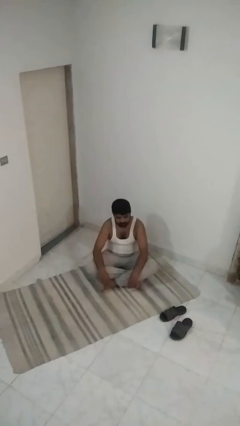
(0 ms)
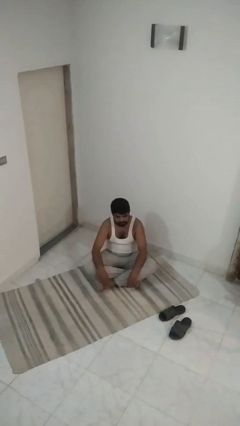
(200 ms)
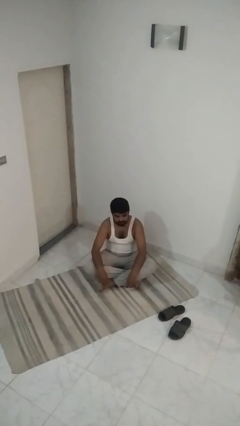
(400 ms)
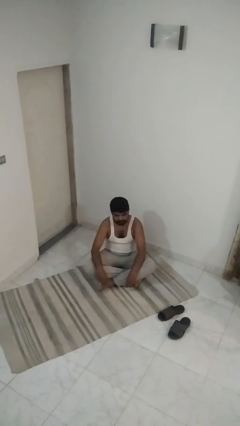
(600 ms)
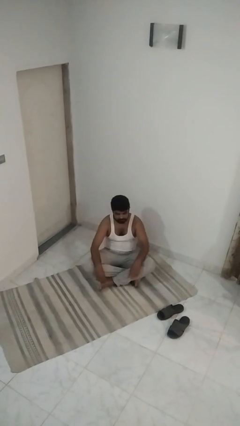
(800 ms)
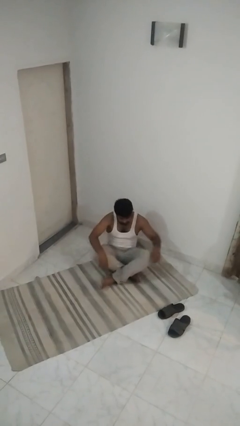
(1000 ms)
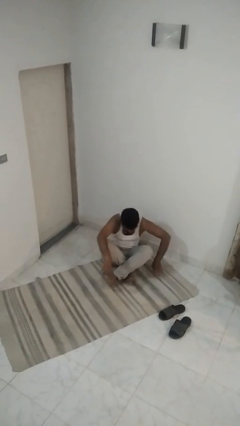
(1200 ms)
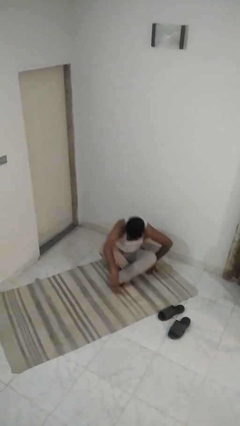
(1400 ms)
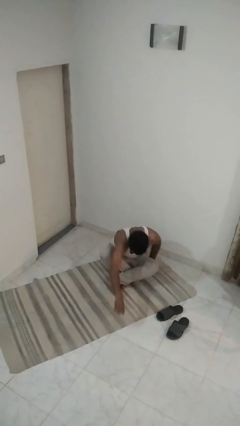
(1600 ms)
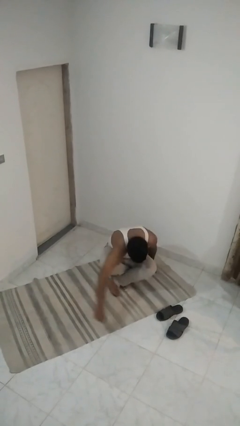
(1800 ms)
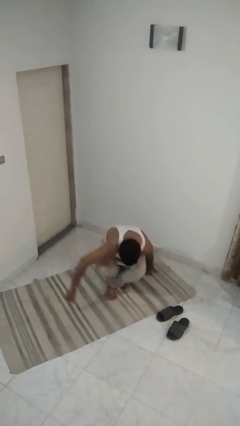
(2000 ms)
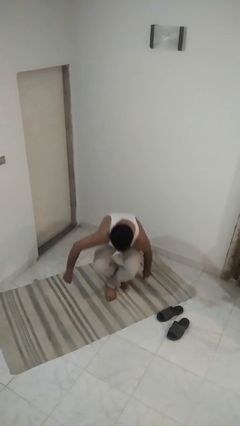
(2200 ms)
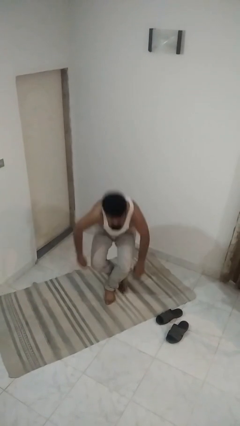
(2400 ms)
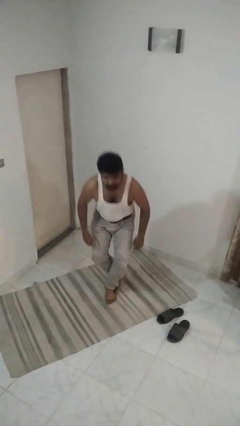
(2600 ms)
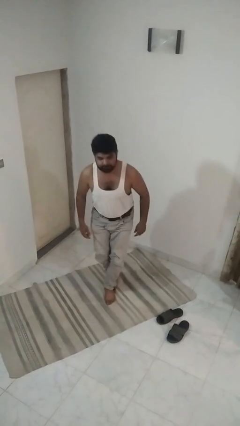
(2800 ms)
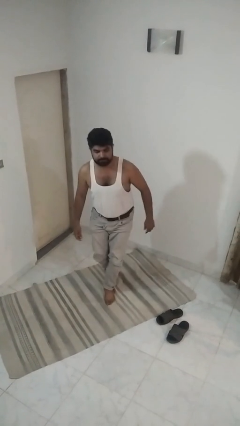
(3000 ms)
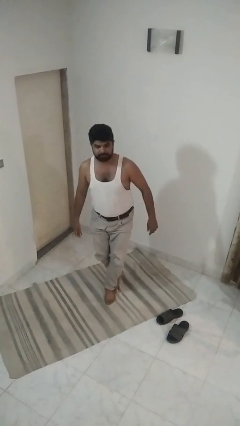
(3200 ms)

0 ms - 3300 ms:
person stands up from floor

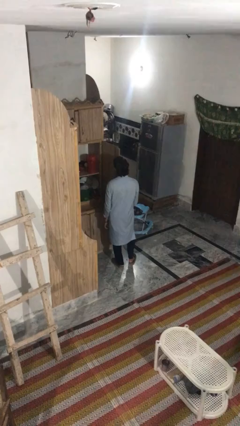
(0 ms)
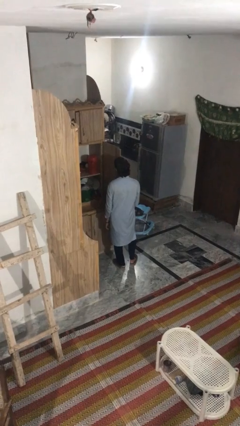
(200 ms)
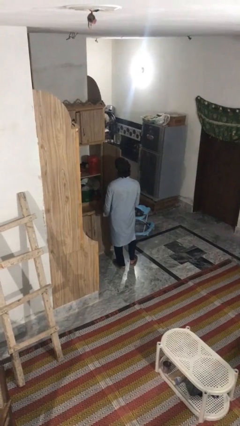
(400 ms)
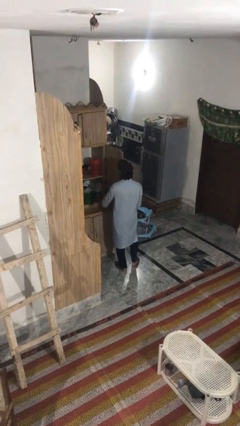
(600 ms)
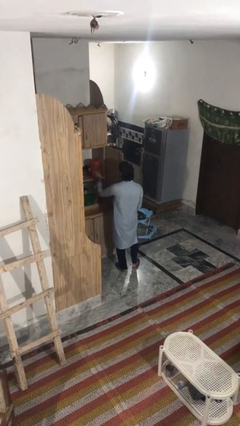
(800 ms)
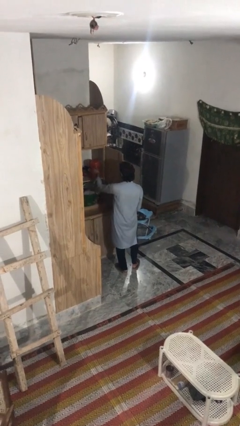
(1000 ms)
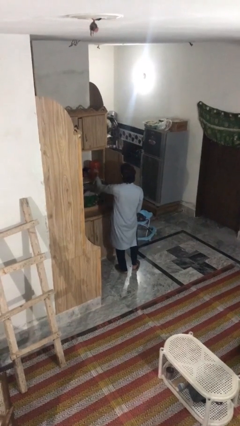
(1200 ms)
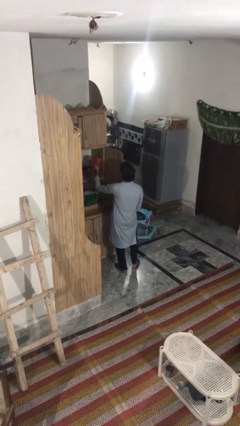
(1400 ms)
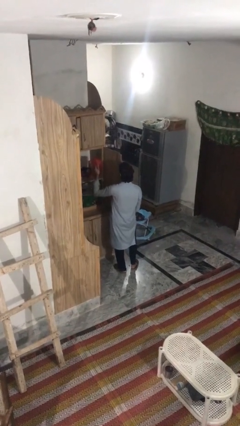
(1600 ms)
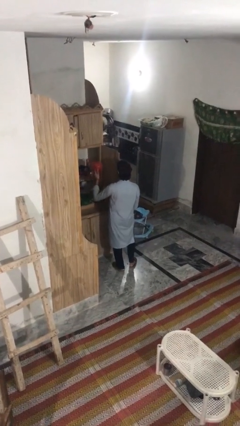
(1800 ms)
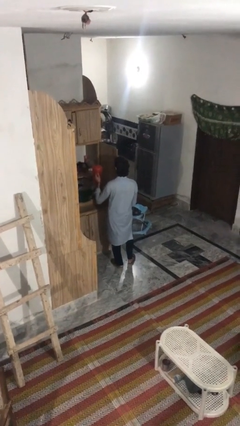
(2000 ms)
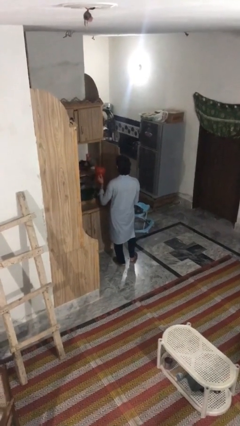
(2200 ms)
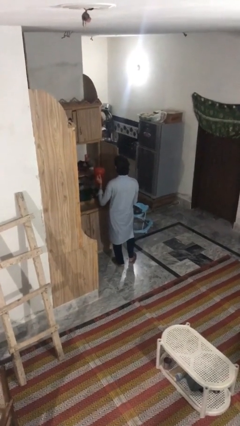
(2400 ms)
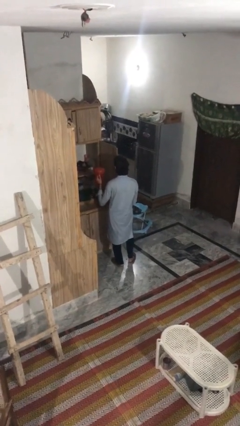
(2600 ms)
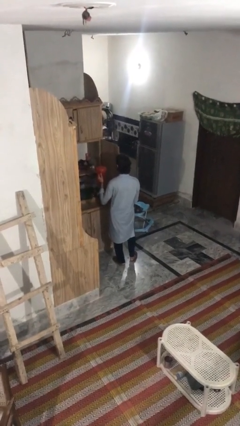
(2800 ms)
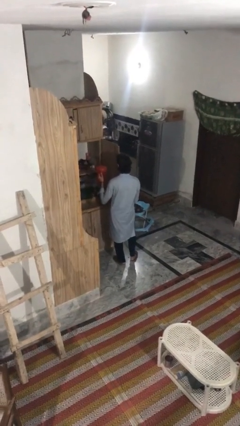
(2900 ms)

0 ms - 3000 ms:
person picks up object from cabinet

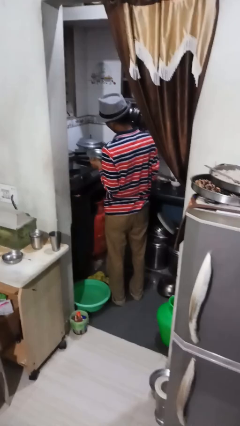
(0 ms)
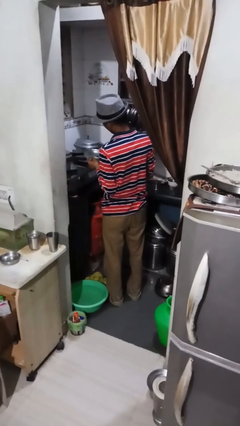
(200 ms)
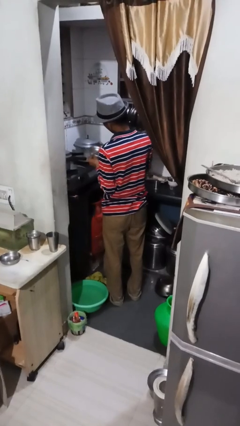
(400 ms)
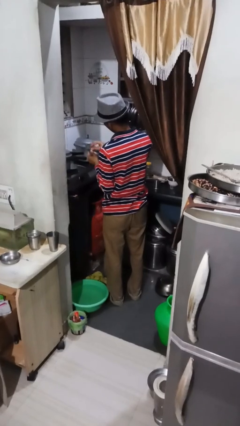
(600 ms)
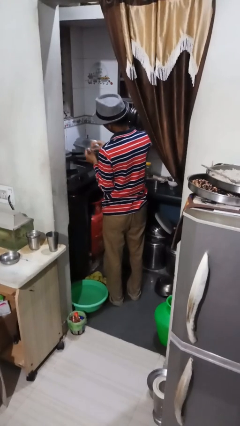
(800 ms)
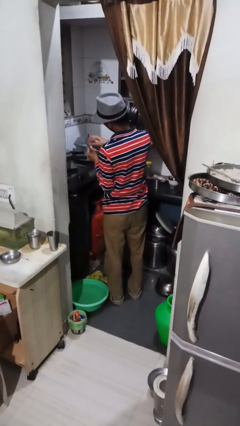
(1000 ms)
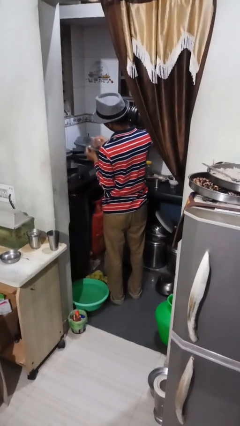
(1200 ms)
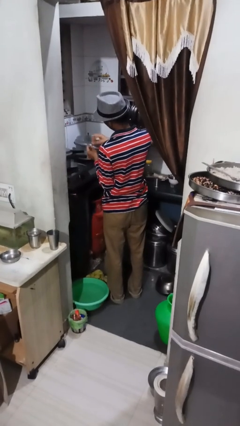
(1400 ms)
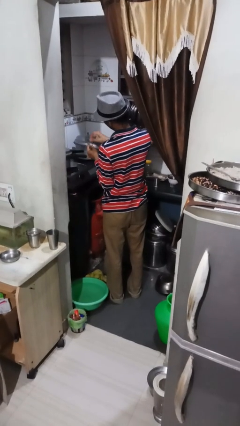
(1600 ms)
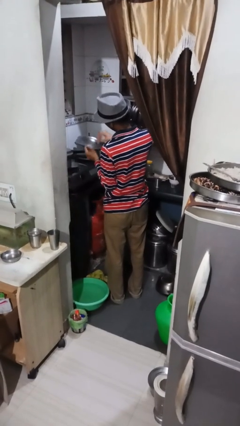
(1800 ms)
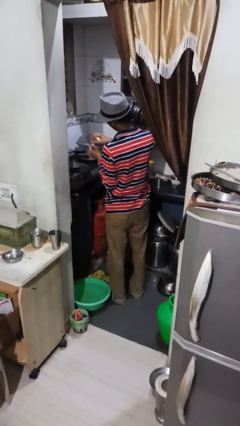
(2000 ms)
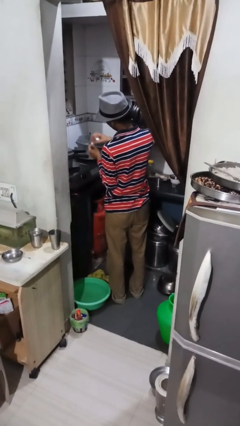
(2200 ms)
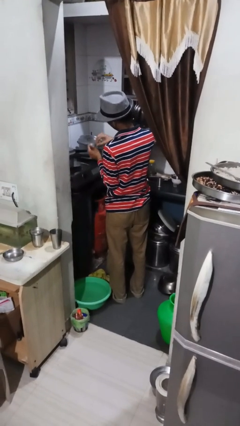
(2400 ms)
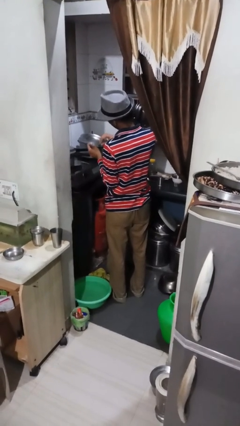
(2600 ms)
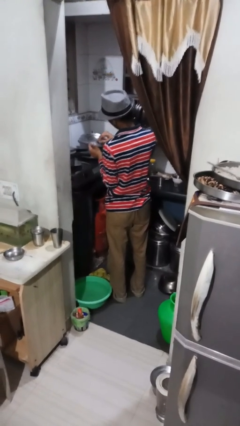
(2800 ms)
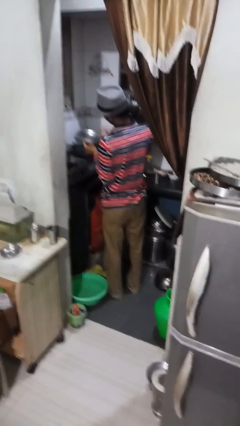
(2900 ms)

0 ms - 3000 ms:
person washes dish

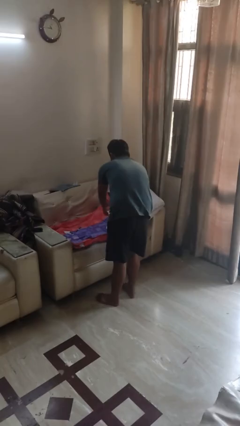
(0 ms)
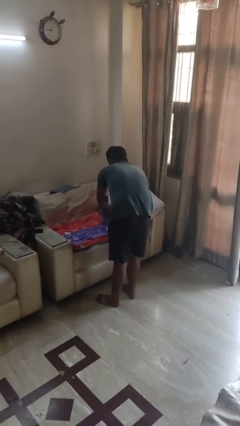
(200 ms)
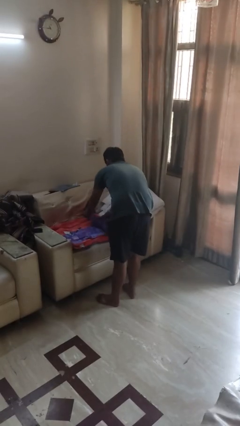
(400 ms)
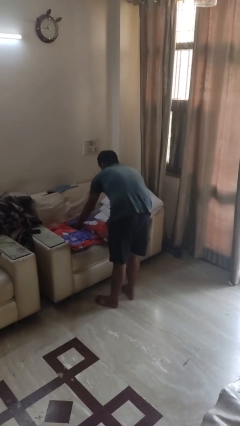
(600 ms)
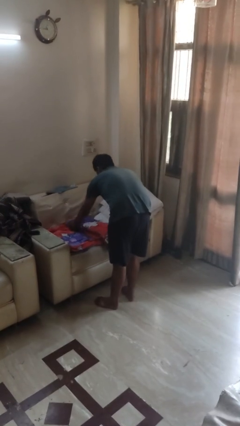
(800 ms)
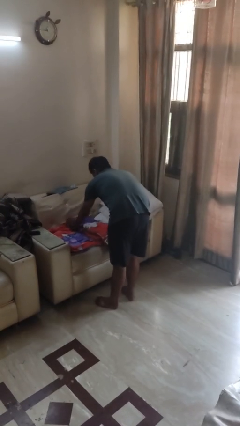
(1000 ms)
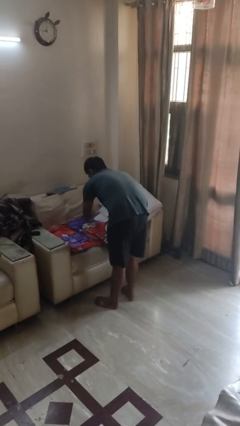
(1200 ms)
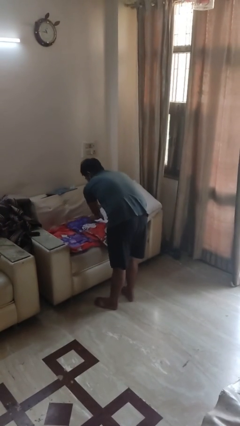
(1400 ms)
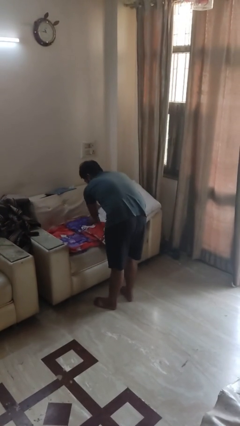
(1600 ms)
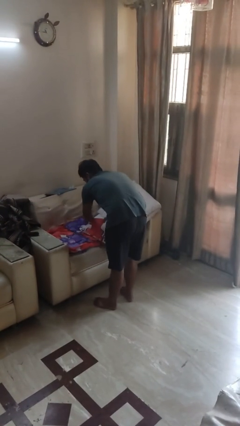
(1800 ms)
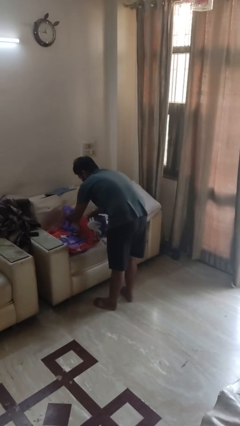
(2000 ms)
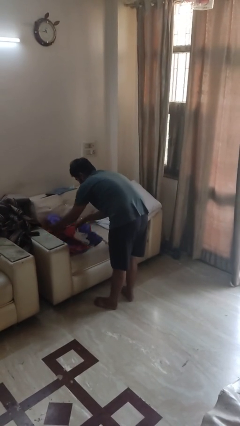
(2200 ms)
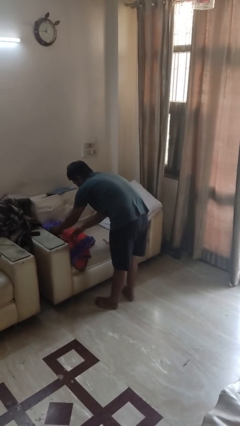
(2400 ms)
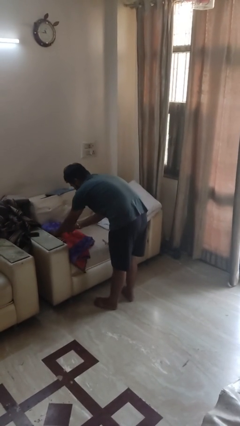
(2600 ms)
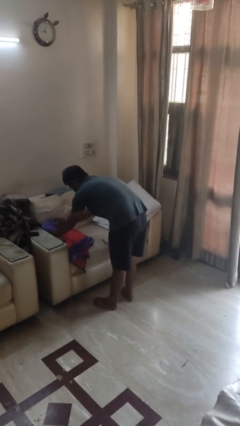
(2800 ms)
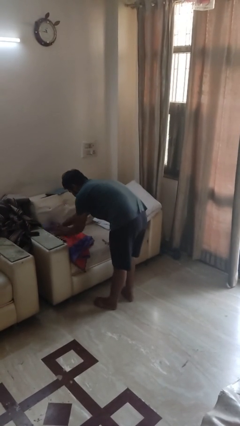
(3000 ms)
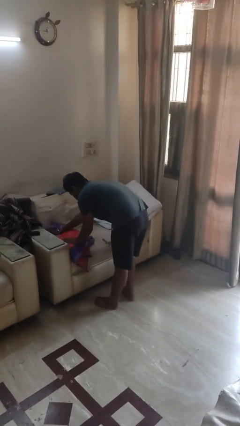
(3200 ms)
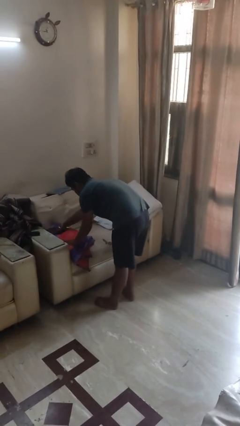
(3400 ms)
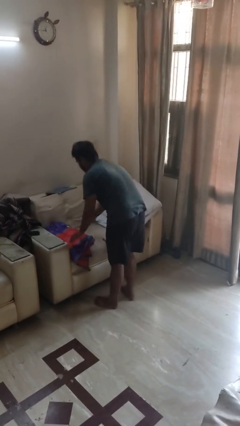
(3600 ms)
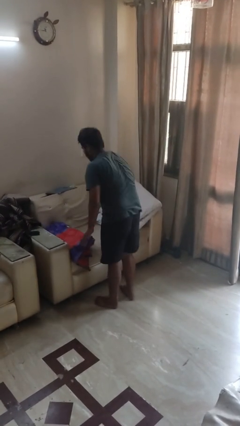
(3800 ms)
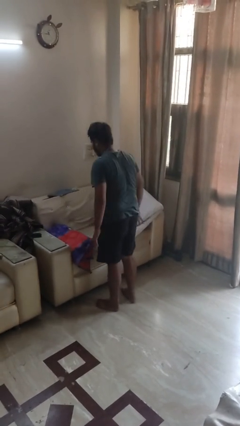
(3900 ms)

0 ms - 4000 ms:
person folds blanket

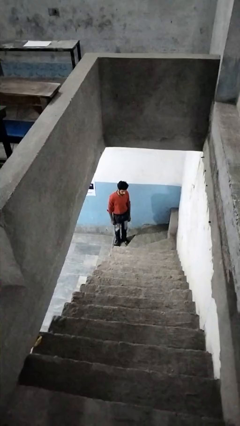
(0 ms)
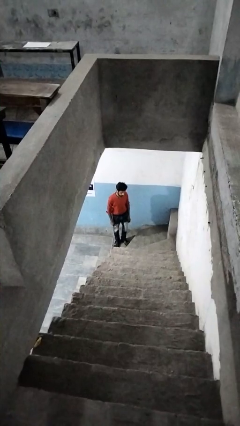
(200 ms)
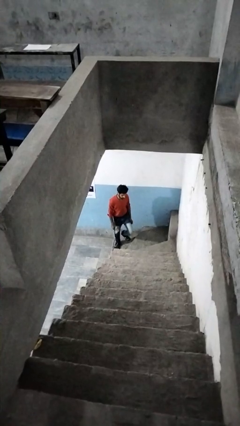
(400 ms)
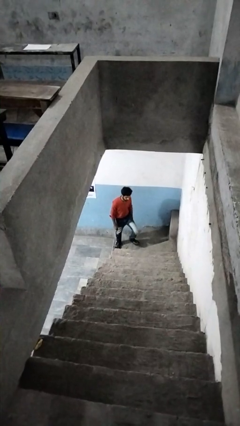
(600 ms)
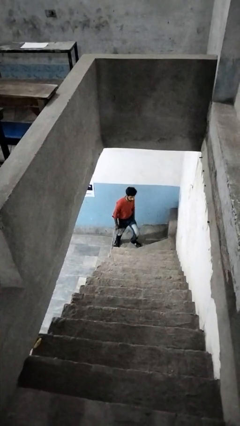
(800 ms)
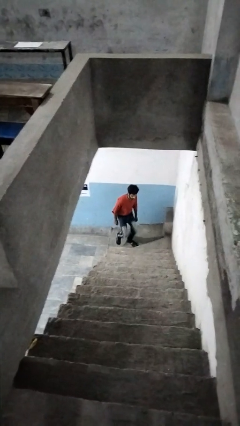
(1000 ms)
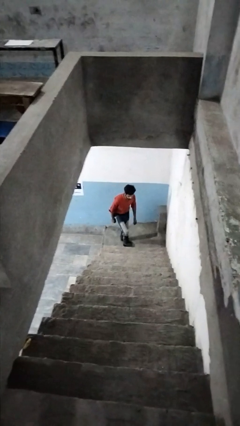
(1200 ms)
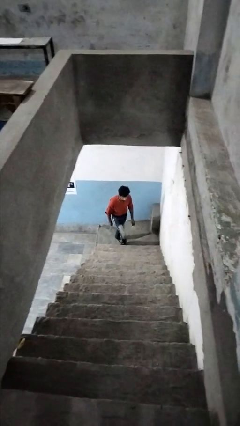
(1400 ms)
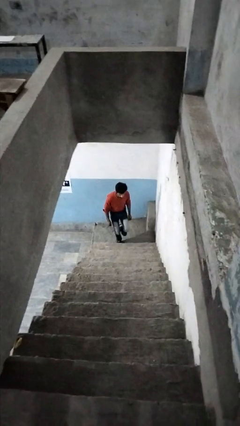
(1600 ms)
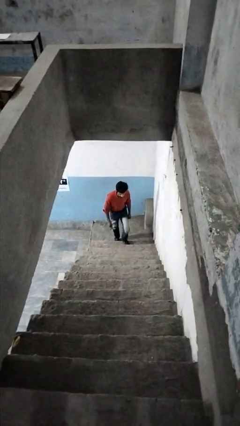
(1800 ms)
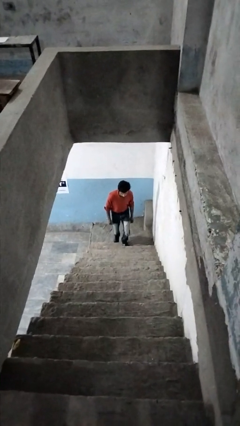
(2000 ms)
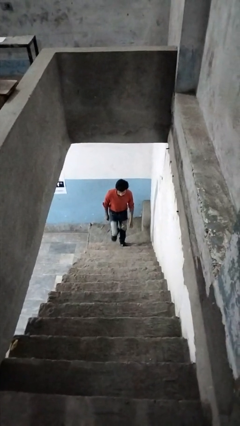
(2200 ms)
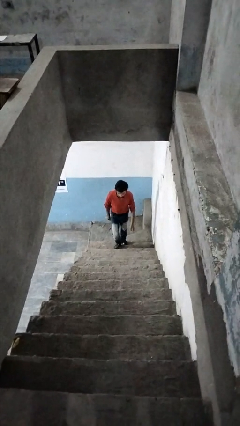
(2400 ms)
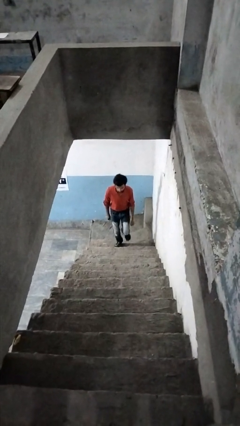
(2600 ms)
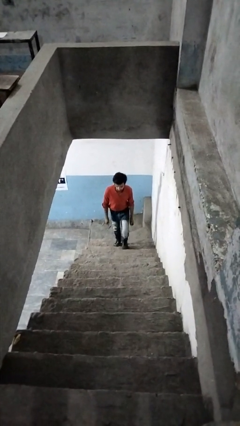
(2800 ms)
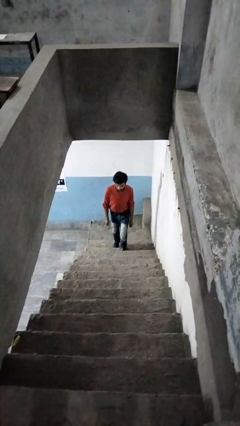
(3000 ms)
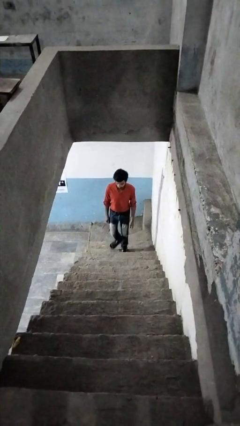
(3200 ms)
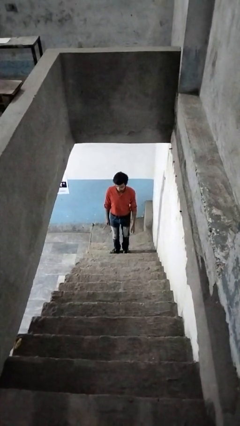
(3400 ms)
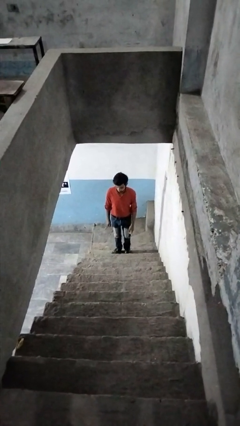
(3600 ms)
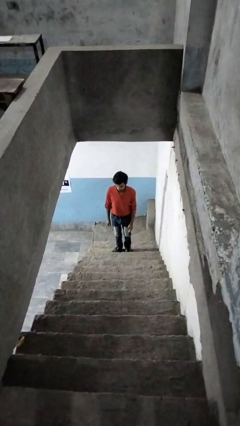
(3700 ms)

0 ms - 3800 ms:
person climbs up stairs

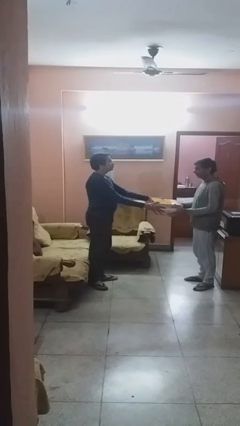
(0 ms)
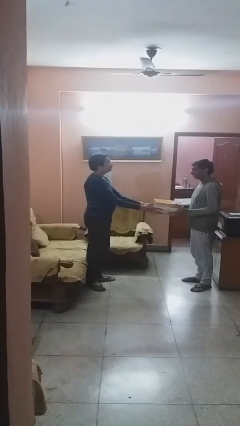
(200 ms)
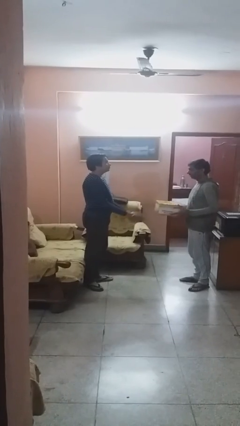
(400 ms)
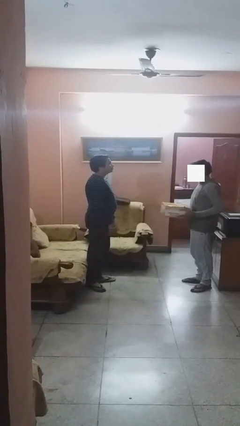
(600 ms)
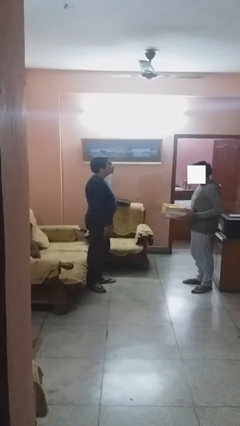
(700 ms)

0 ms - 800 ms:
person transfers object to person
